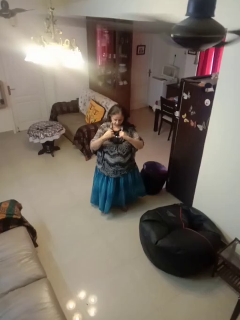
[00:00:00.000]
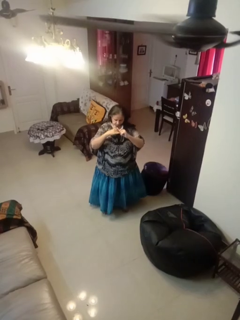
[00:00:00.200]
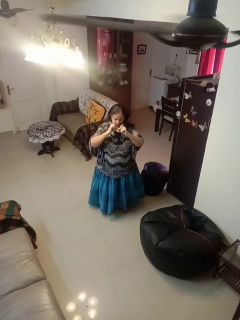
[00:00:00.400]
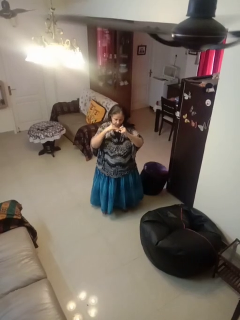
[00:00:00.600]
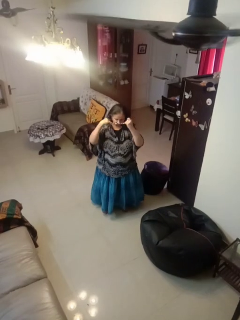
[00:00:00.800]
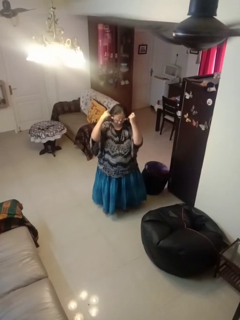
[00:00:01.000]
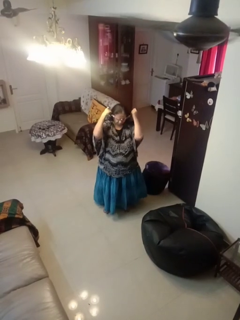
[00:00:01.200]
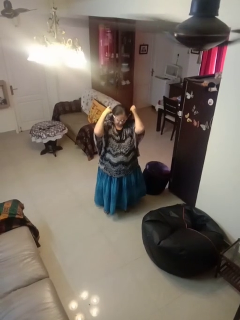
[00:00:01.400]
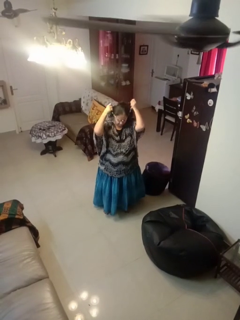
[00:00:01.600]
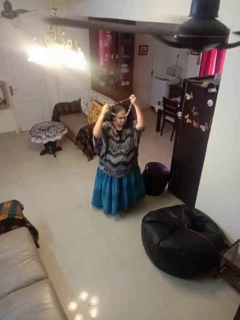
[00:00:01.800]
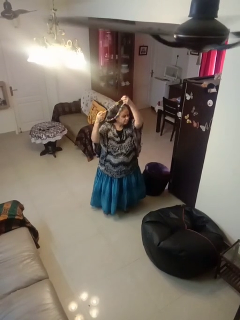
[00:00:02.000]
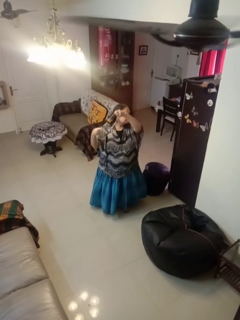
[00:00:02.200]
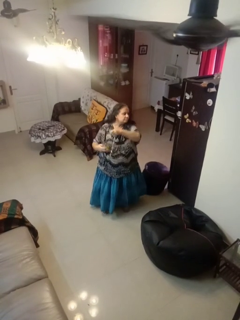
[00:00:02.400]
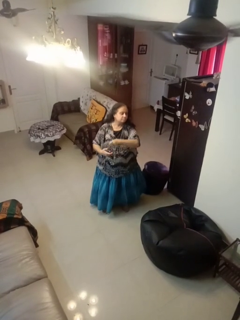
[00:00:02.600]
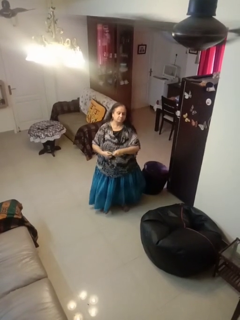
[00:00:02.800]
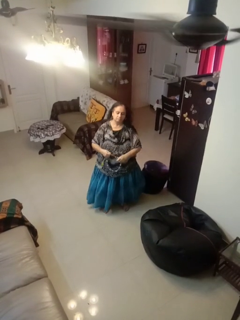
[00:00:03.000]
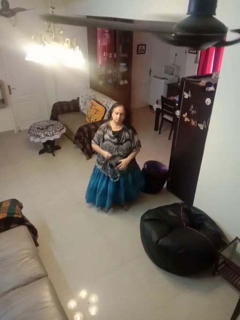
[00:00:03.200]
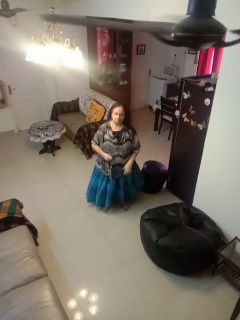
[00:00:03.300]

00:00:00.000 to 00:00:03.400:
person takes off necklace

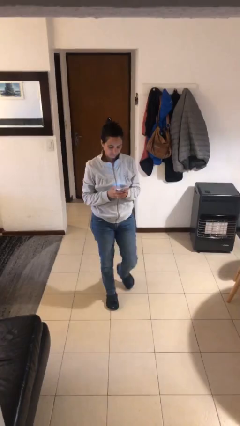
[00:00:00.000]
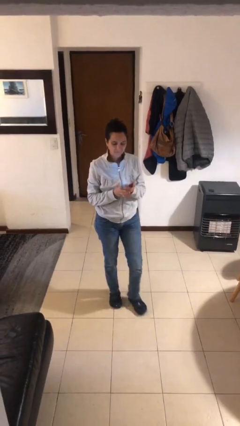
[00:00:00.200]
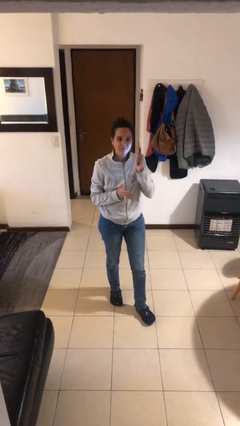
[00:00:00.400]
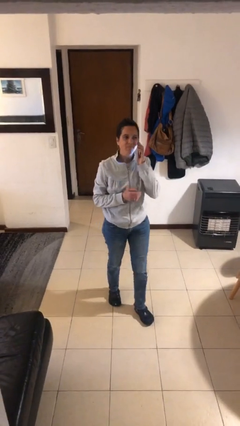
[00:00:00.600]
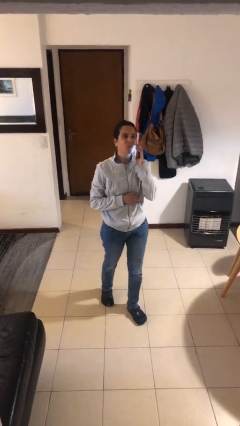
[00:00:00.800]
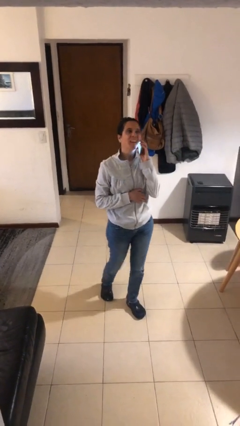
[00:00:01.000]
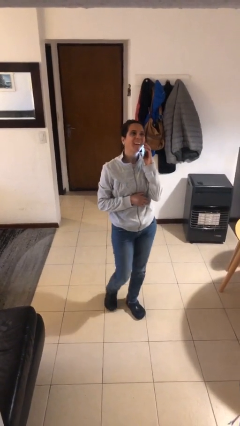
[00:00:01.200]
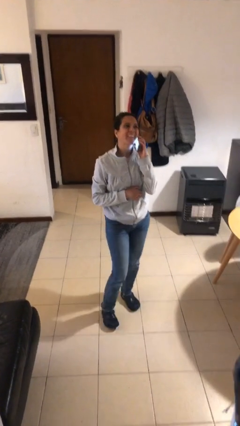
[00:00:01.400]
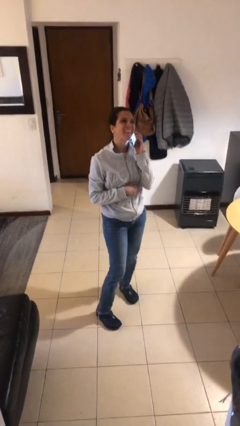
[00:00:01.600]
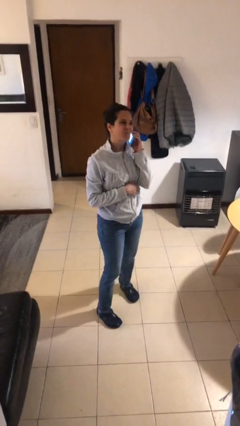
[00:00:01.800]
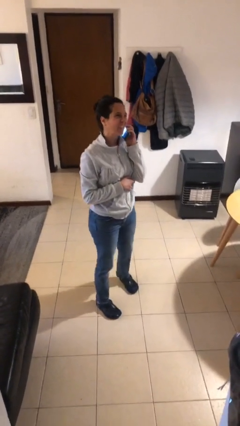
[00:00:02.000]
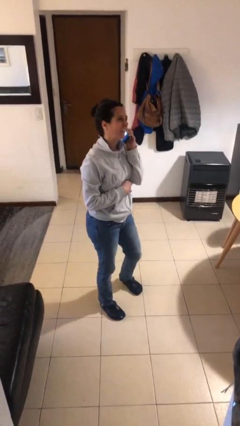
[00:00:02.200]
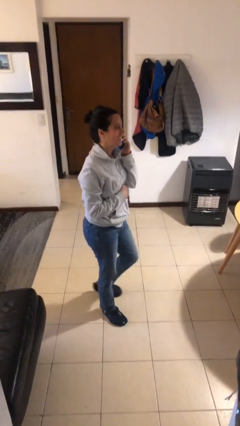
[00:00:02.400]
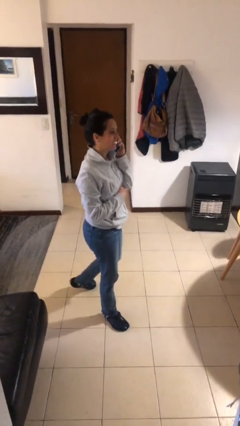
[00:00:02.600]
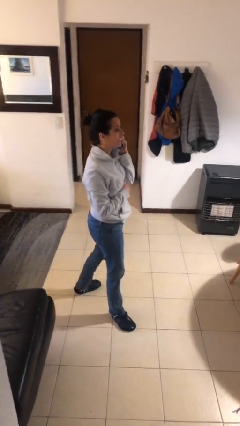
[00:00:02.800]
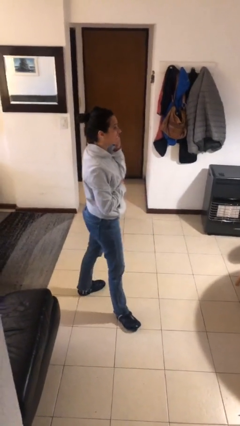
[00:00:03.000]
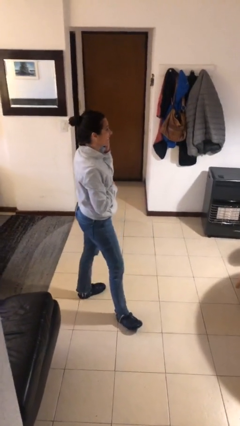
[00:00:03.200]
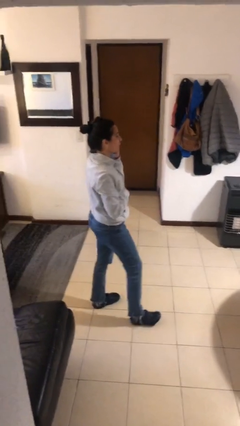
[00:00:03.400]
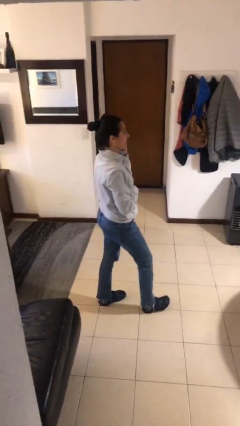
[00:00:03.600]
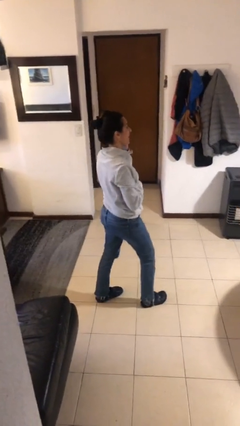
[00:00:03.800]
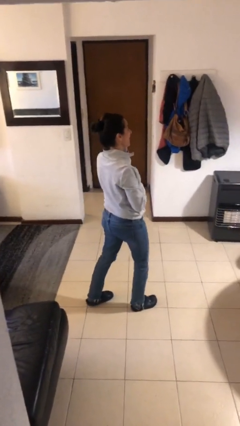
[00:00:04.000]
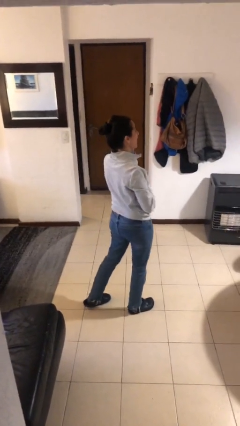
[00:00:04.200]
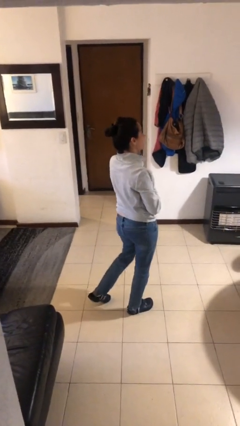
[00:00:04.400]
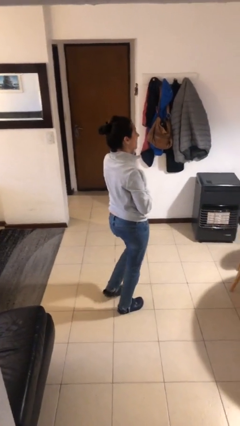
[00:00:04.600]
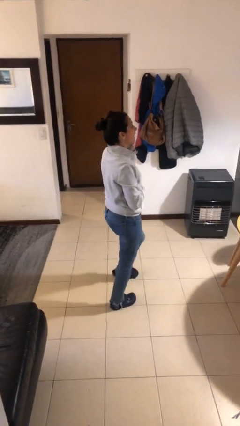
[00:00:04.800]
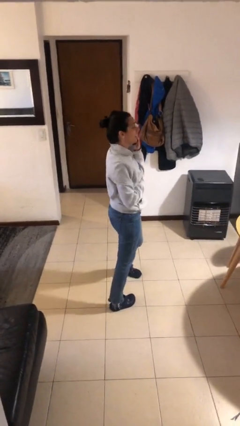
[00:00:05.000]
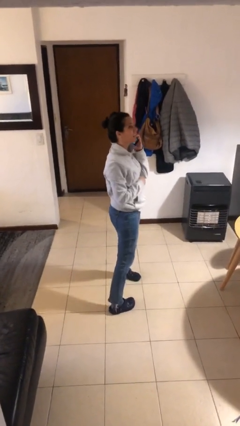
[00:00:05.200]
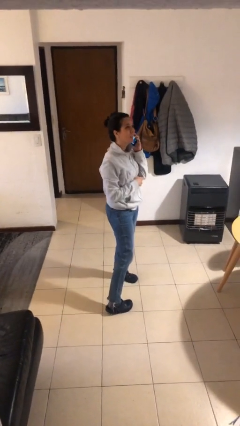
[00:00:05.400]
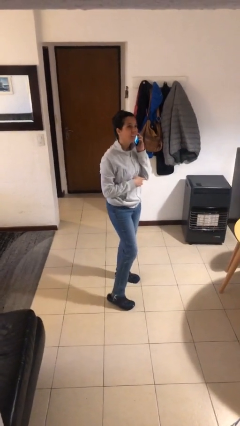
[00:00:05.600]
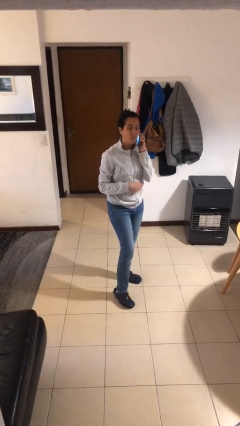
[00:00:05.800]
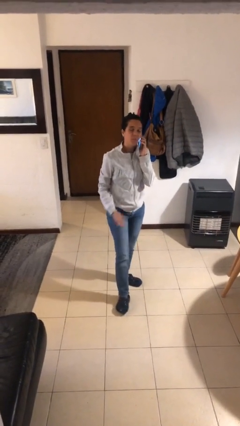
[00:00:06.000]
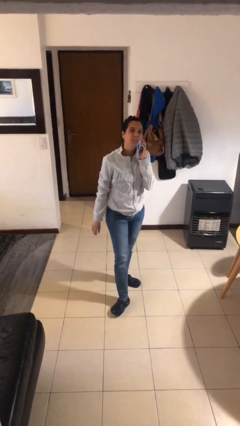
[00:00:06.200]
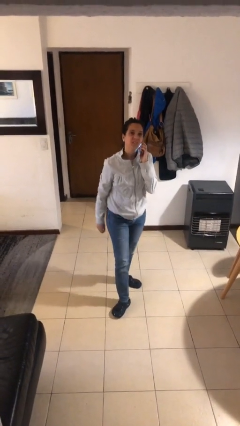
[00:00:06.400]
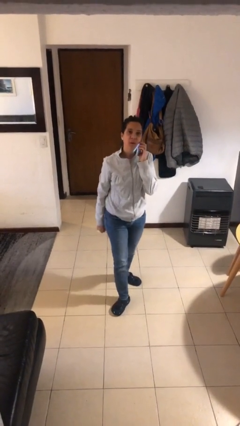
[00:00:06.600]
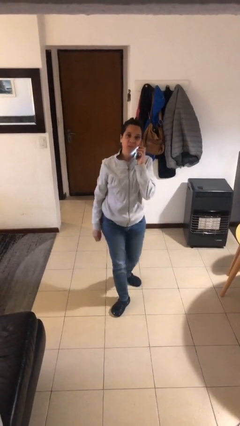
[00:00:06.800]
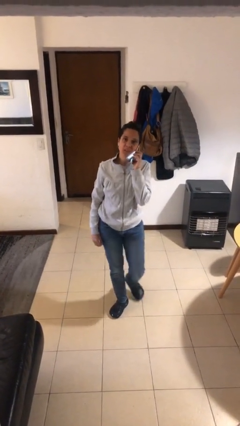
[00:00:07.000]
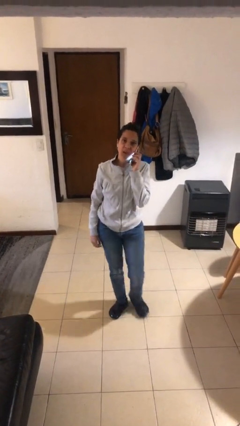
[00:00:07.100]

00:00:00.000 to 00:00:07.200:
person talks on phone

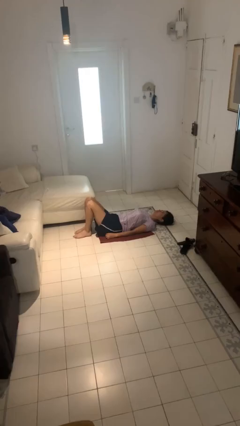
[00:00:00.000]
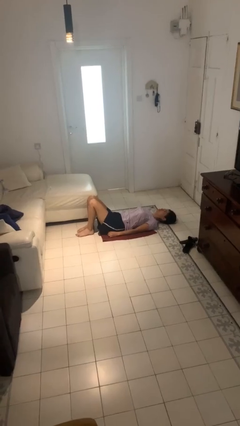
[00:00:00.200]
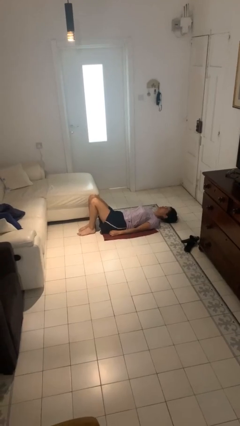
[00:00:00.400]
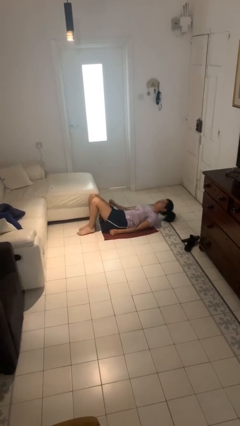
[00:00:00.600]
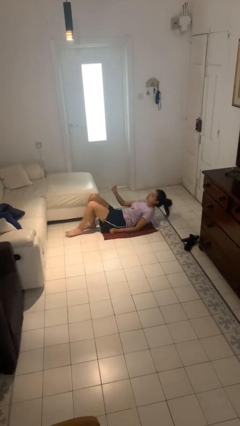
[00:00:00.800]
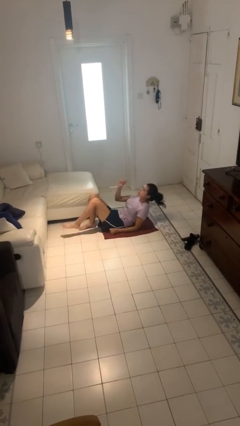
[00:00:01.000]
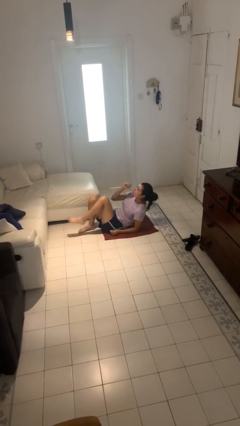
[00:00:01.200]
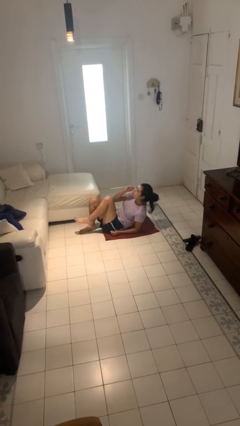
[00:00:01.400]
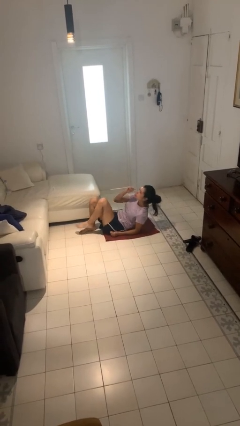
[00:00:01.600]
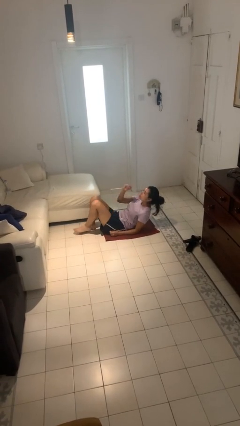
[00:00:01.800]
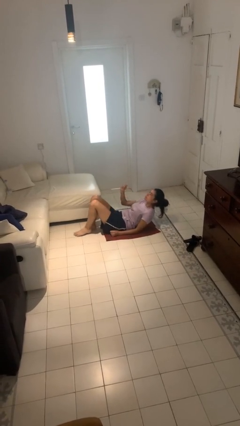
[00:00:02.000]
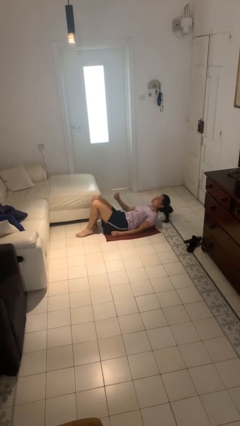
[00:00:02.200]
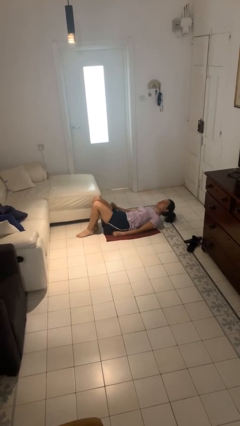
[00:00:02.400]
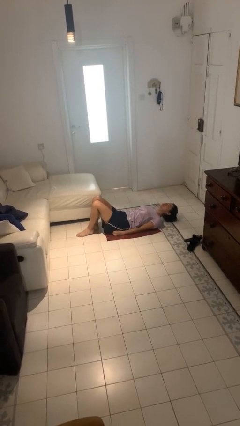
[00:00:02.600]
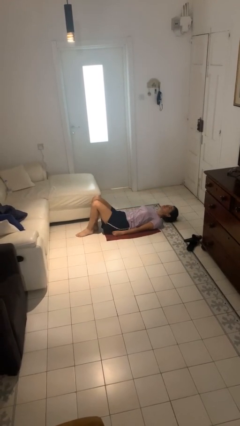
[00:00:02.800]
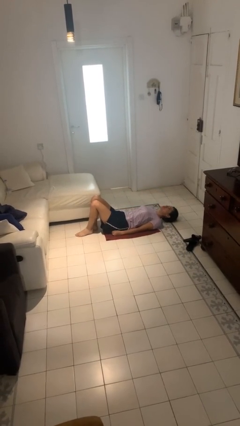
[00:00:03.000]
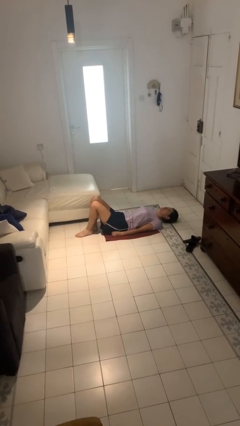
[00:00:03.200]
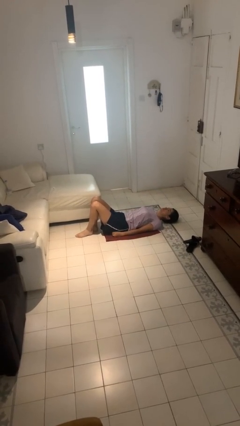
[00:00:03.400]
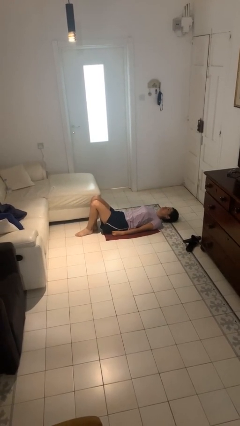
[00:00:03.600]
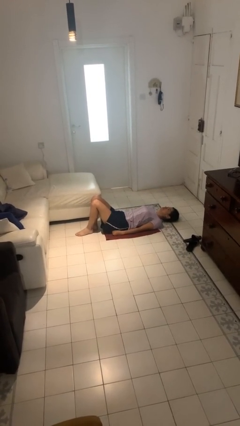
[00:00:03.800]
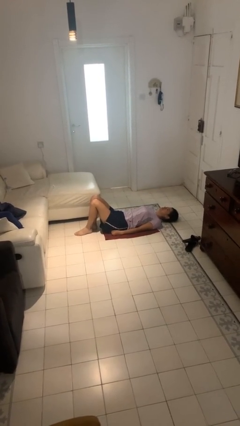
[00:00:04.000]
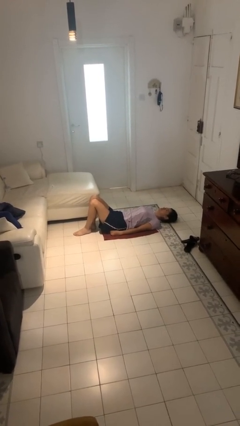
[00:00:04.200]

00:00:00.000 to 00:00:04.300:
person exercises with situp

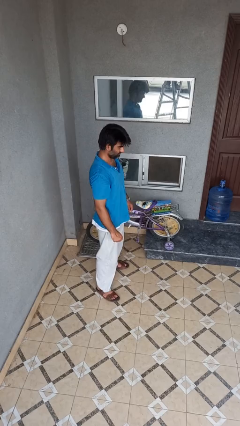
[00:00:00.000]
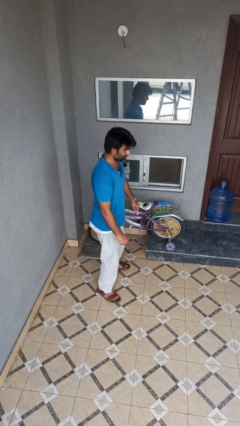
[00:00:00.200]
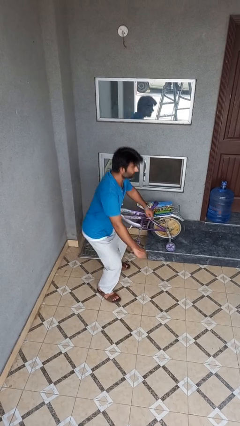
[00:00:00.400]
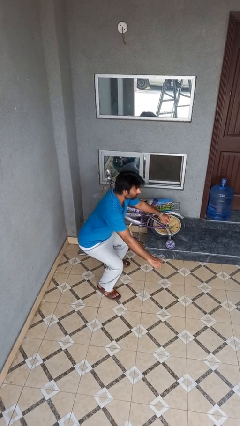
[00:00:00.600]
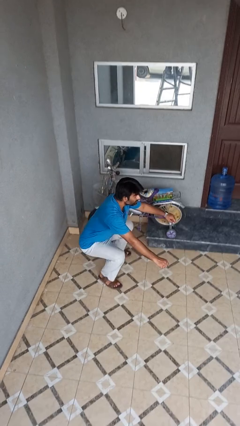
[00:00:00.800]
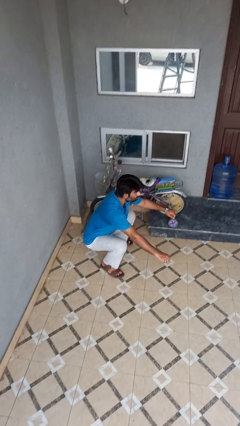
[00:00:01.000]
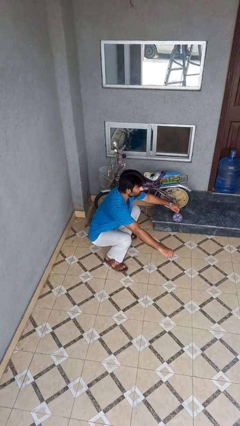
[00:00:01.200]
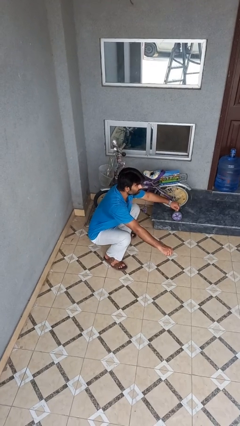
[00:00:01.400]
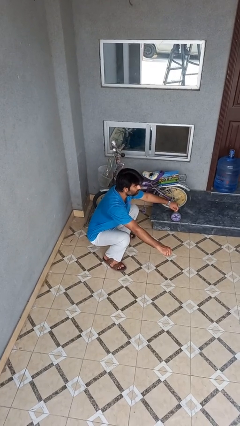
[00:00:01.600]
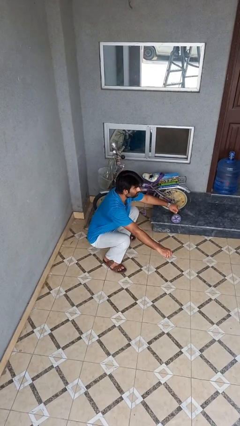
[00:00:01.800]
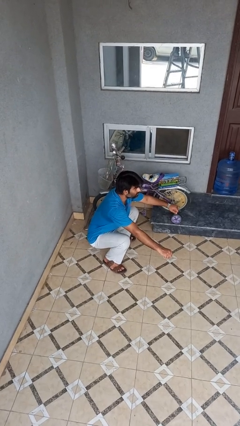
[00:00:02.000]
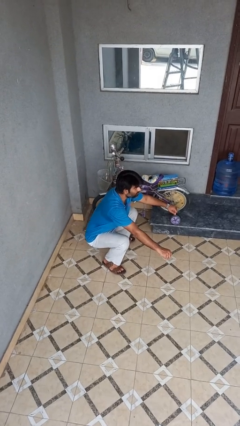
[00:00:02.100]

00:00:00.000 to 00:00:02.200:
person squats

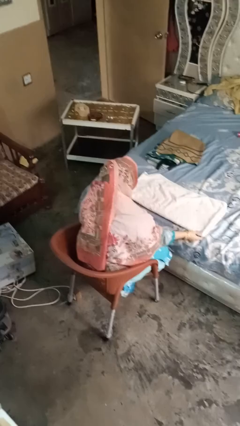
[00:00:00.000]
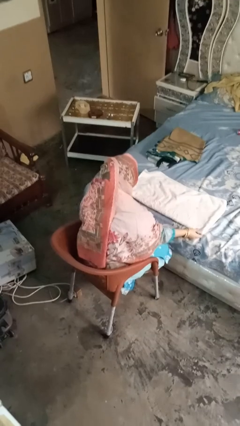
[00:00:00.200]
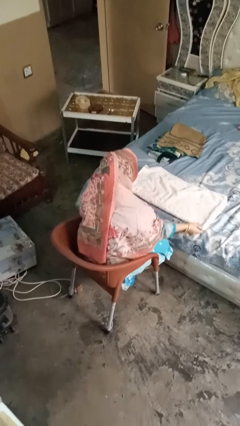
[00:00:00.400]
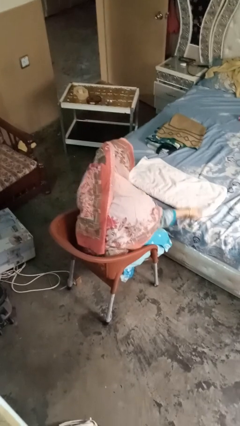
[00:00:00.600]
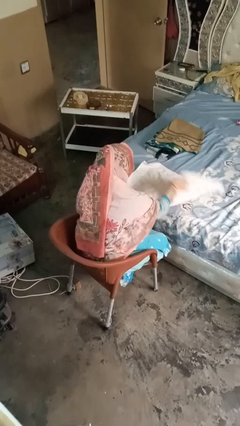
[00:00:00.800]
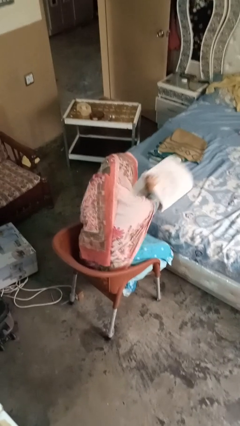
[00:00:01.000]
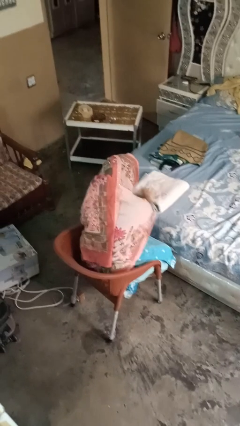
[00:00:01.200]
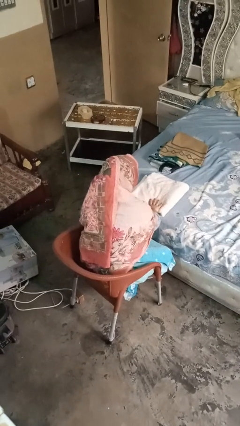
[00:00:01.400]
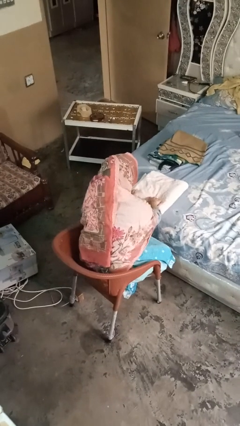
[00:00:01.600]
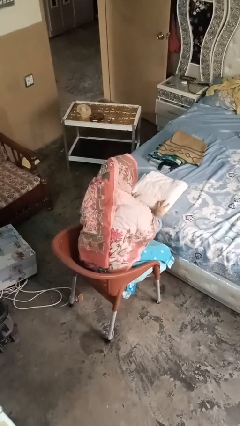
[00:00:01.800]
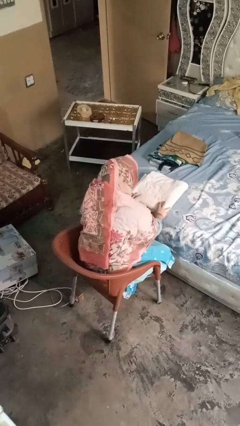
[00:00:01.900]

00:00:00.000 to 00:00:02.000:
person folds towel
